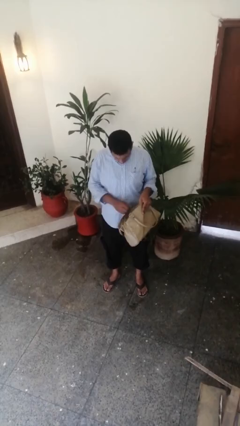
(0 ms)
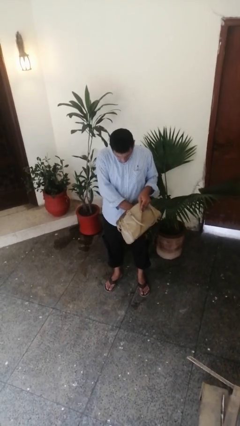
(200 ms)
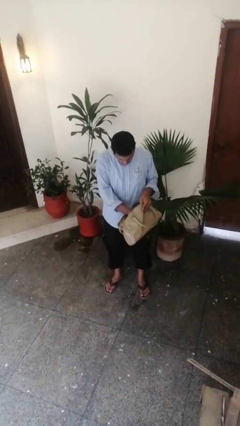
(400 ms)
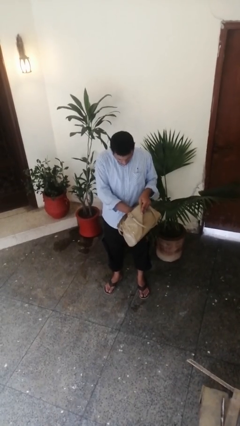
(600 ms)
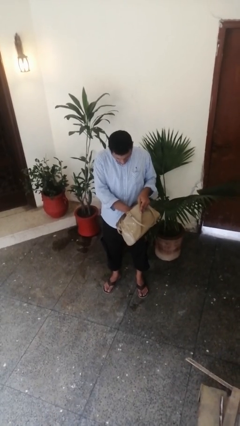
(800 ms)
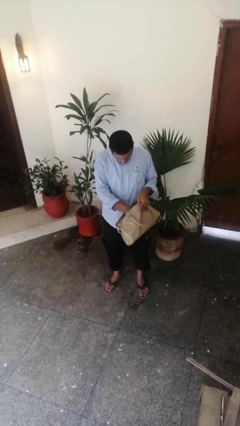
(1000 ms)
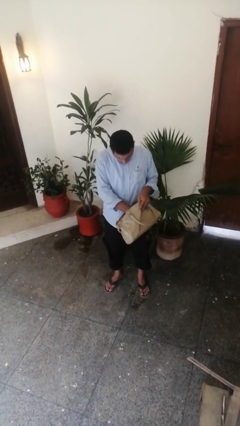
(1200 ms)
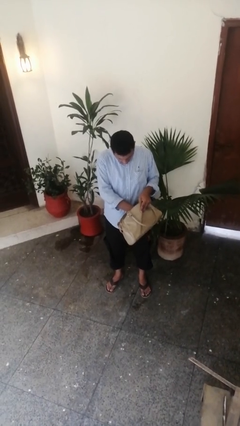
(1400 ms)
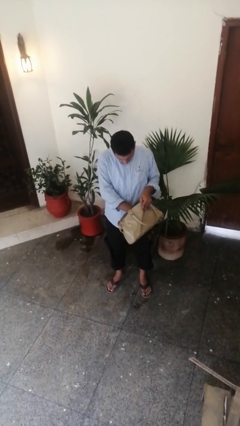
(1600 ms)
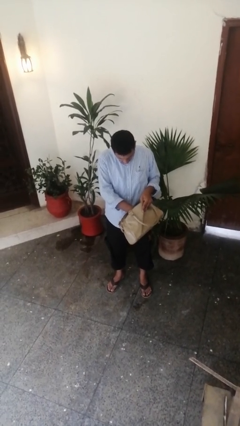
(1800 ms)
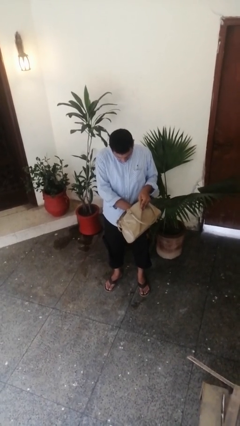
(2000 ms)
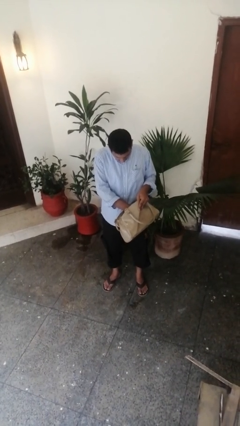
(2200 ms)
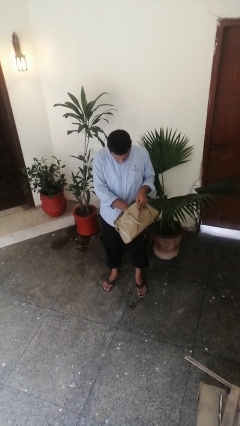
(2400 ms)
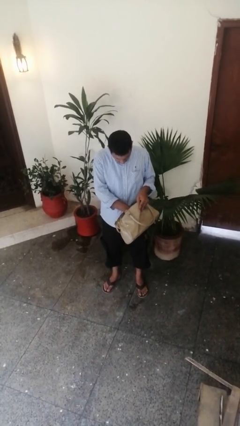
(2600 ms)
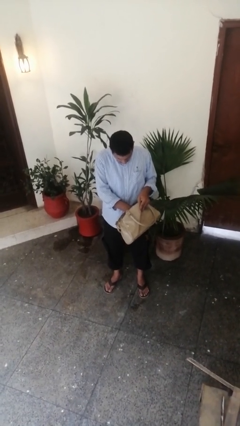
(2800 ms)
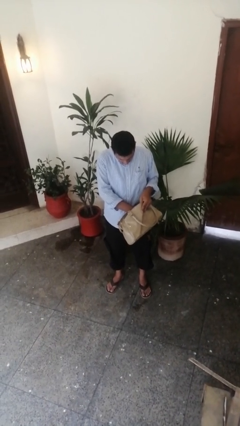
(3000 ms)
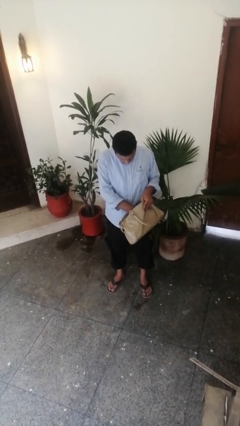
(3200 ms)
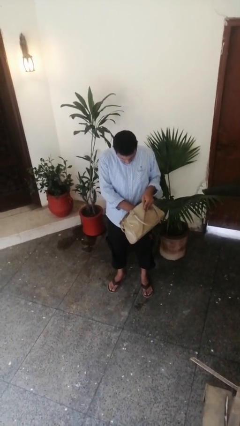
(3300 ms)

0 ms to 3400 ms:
person searches in purse

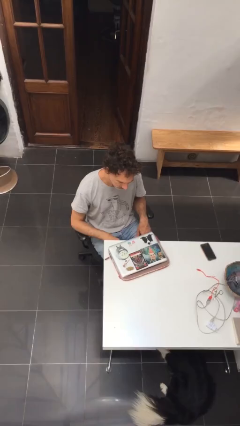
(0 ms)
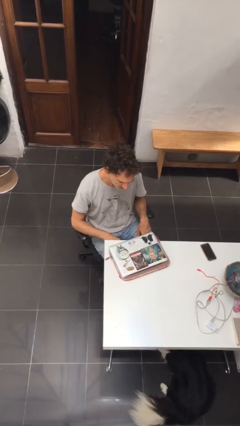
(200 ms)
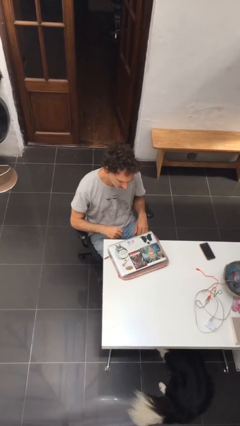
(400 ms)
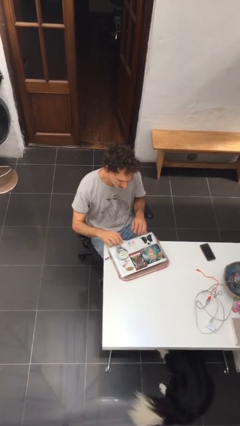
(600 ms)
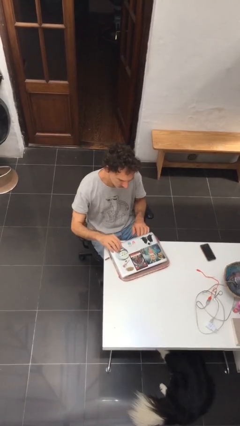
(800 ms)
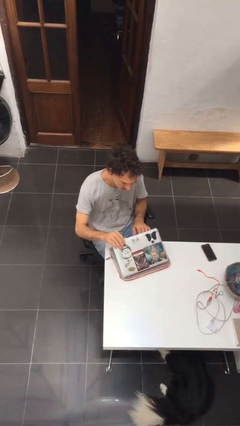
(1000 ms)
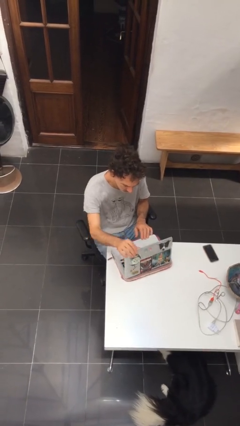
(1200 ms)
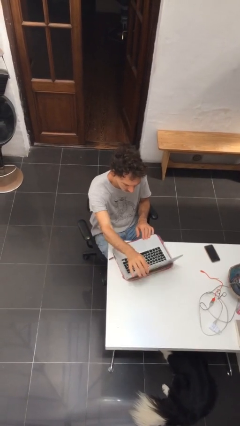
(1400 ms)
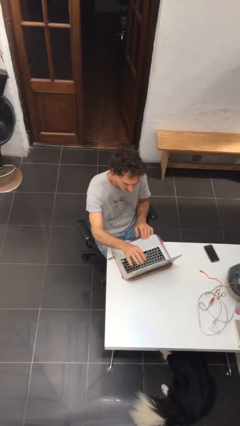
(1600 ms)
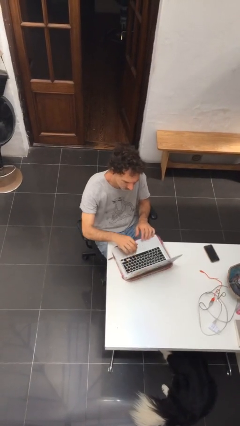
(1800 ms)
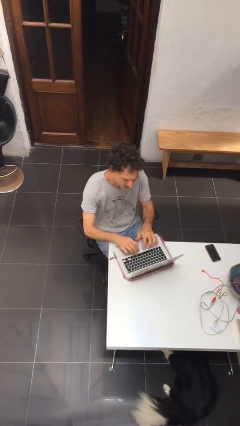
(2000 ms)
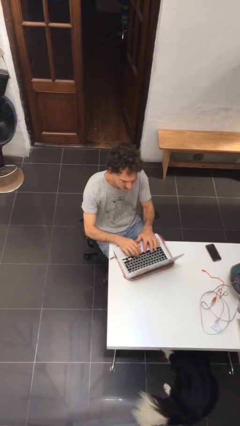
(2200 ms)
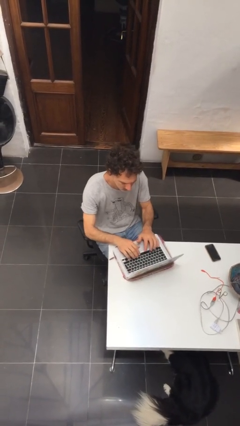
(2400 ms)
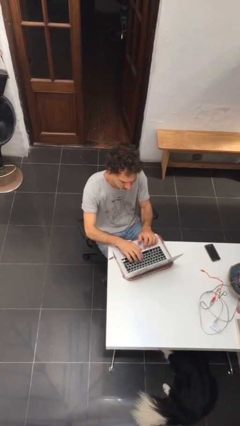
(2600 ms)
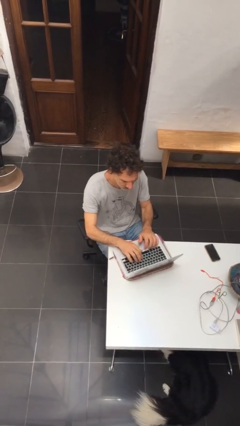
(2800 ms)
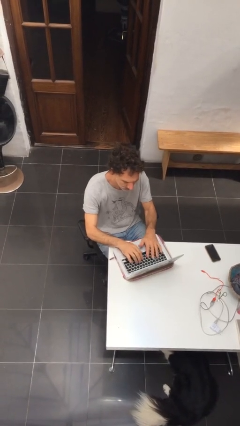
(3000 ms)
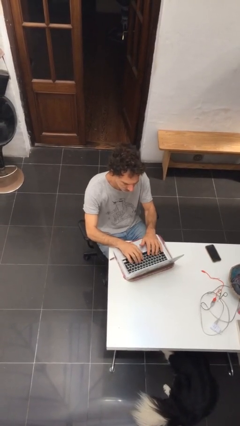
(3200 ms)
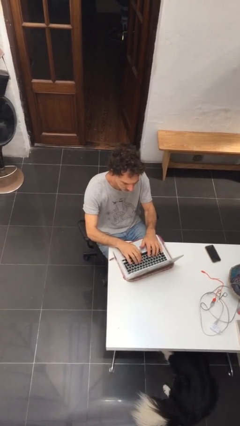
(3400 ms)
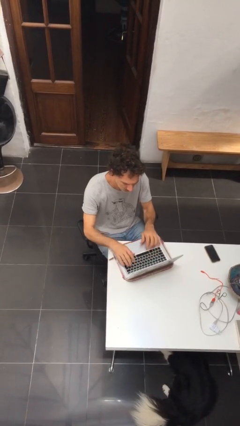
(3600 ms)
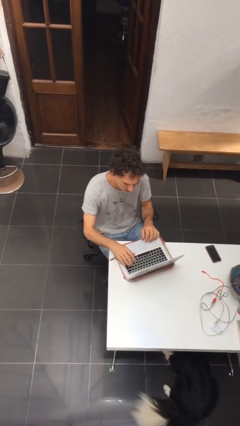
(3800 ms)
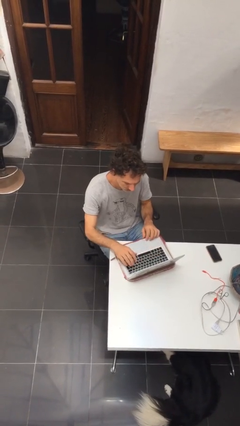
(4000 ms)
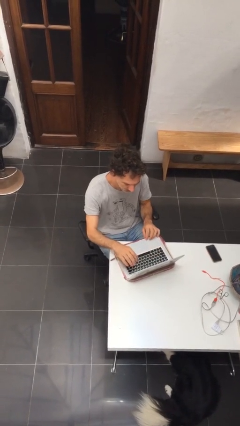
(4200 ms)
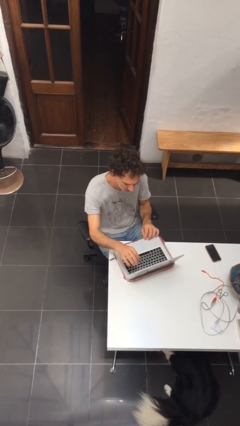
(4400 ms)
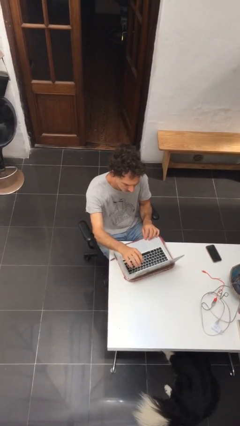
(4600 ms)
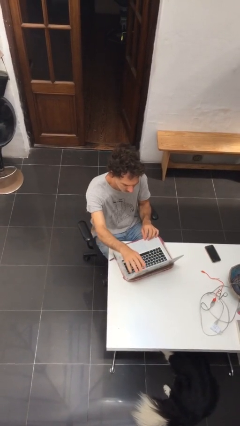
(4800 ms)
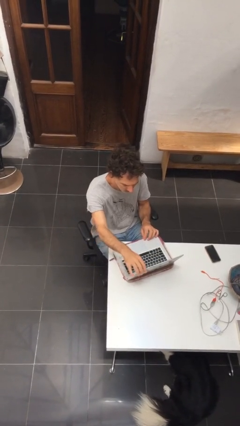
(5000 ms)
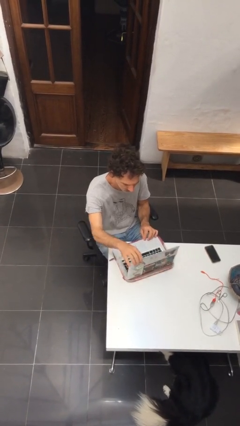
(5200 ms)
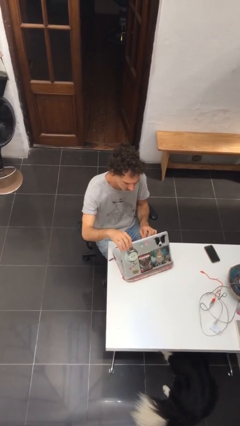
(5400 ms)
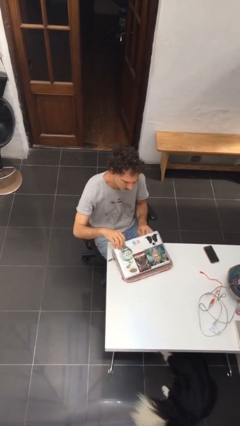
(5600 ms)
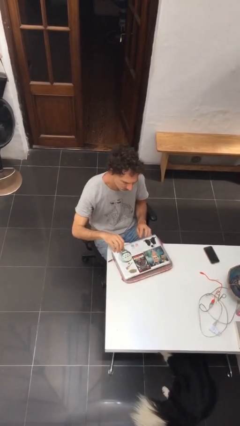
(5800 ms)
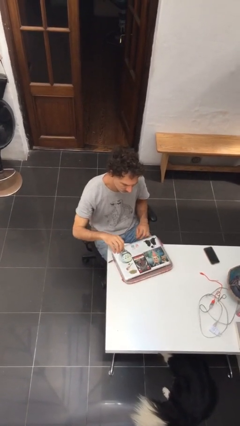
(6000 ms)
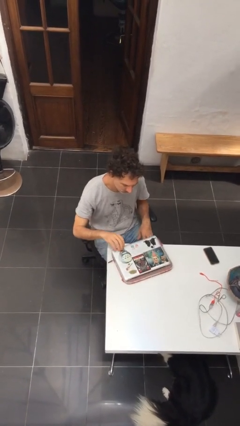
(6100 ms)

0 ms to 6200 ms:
person interacts with laptop

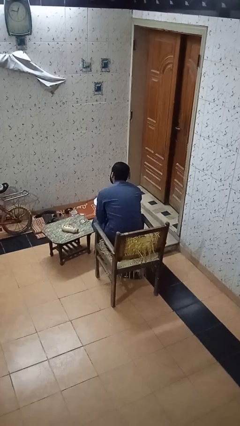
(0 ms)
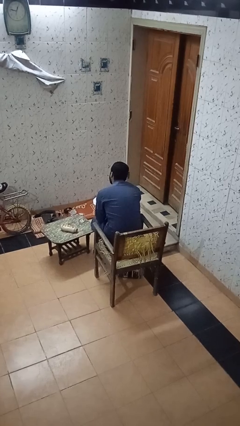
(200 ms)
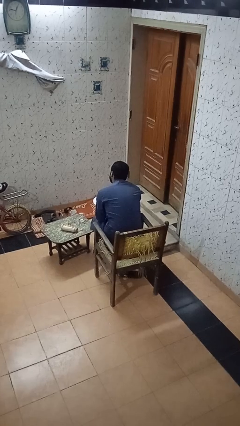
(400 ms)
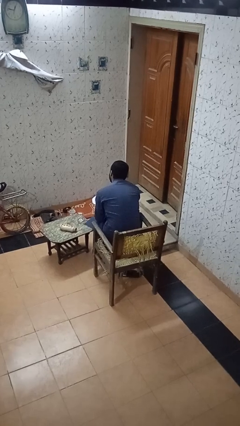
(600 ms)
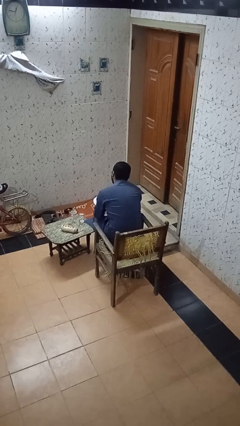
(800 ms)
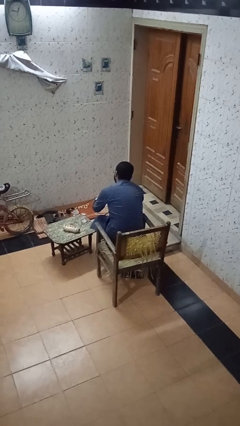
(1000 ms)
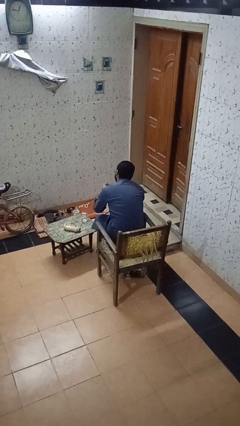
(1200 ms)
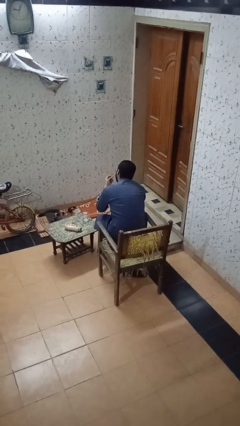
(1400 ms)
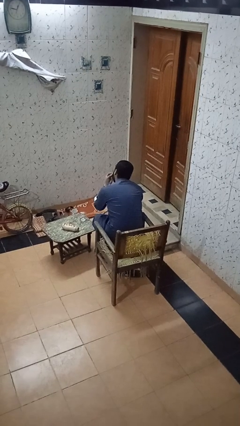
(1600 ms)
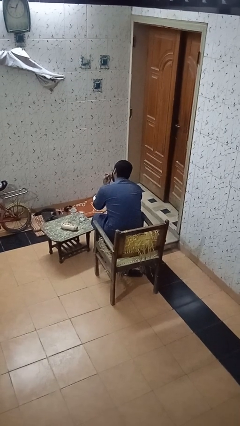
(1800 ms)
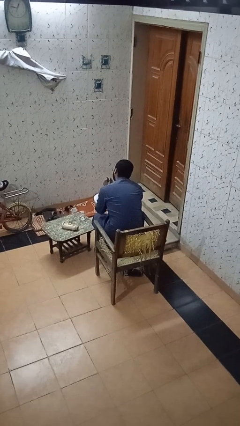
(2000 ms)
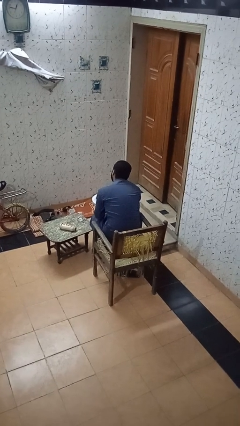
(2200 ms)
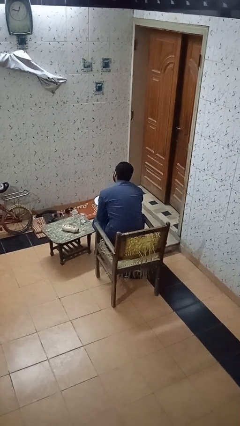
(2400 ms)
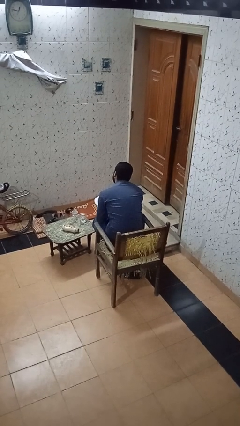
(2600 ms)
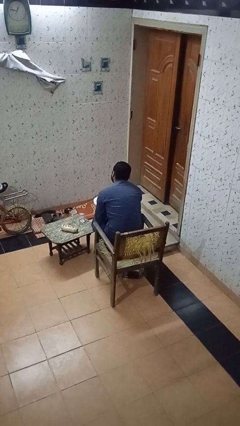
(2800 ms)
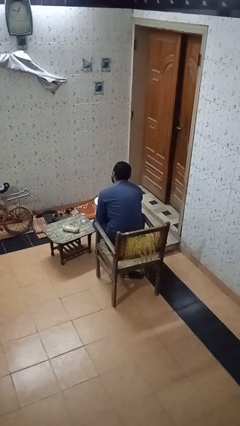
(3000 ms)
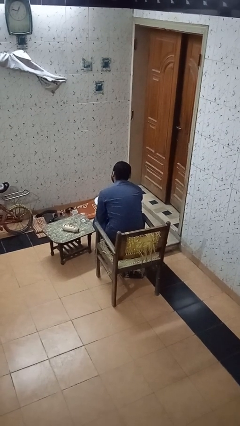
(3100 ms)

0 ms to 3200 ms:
person eats with hands

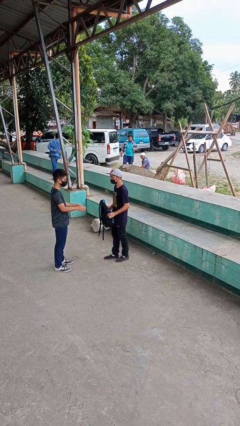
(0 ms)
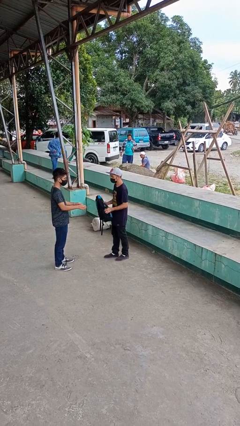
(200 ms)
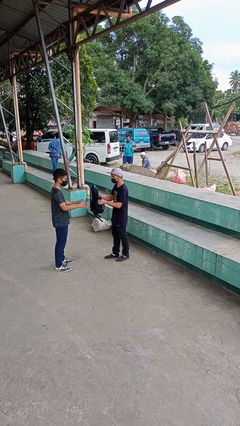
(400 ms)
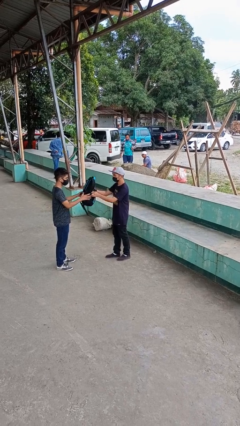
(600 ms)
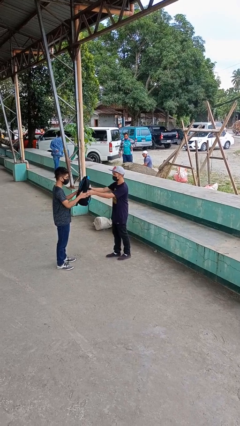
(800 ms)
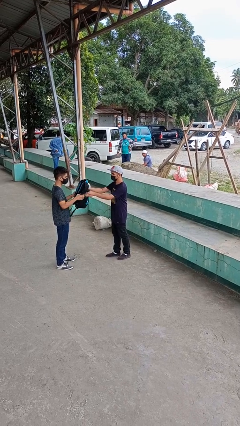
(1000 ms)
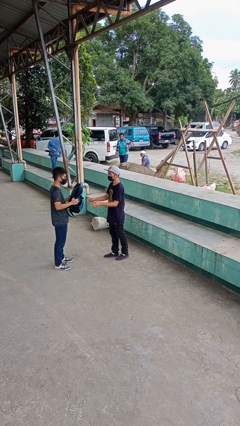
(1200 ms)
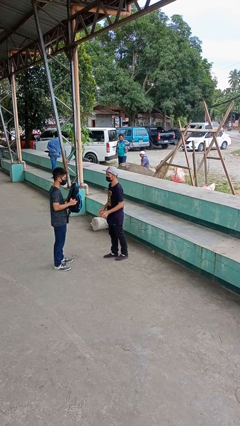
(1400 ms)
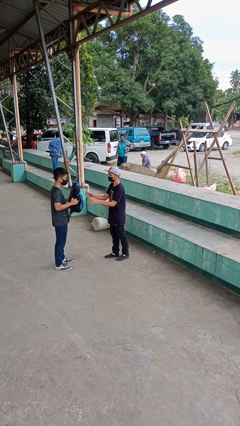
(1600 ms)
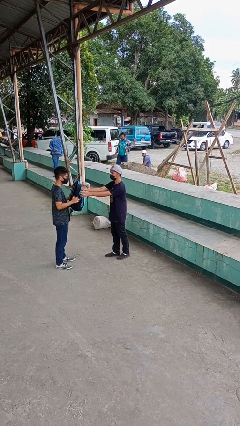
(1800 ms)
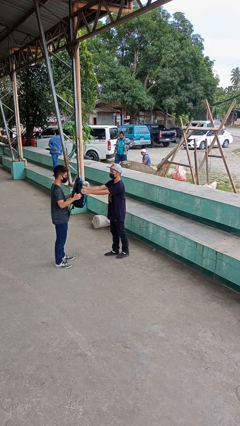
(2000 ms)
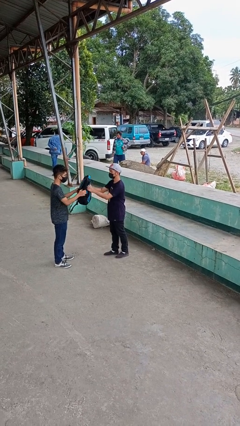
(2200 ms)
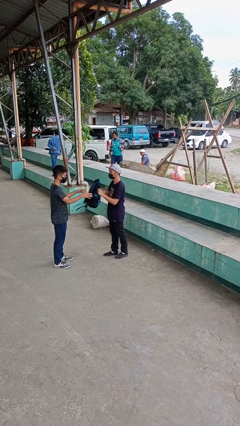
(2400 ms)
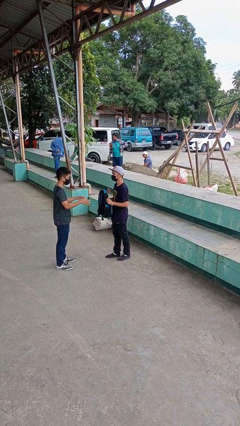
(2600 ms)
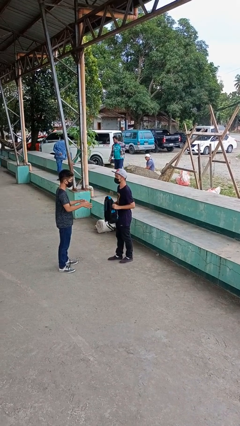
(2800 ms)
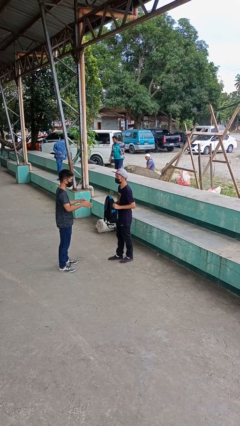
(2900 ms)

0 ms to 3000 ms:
person transfers object to person

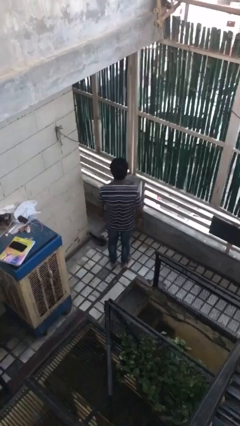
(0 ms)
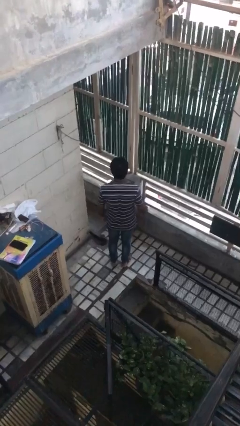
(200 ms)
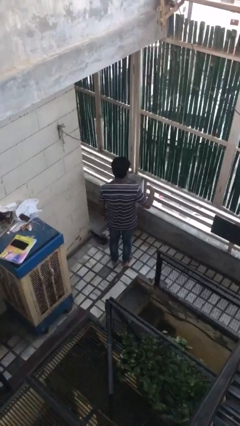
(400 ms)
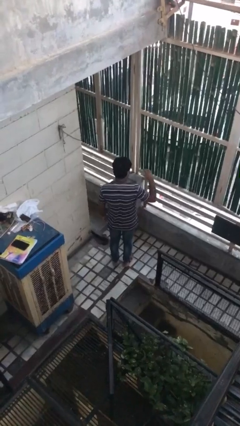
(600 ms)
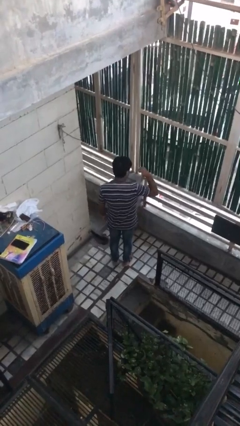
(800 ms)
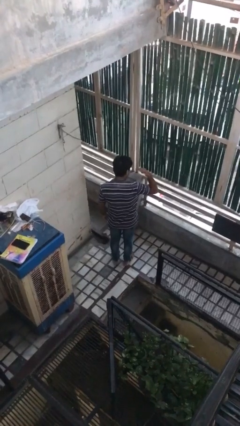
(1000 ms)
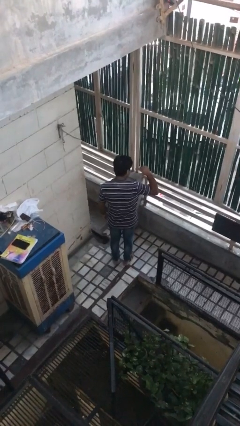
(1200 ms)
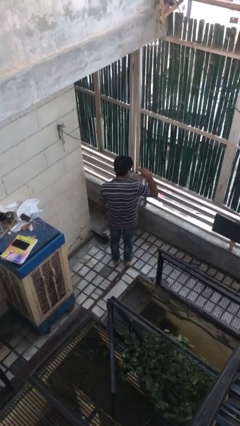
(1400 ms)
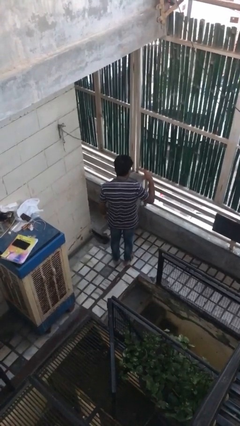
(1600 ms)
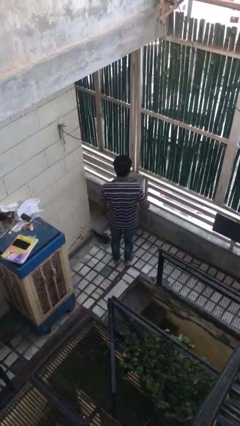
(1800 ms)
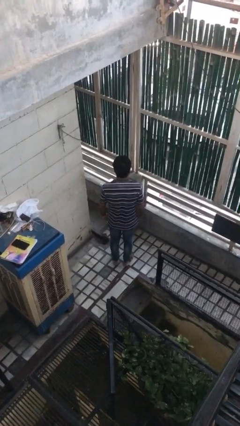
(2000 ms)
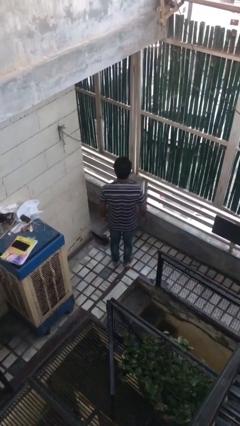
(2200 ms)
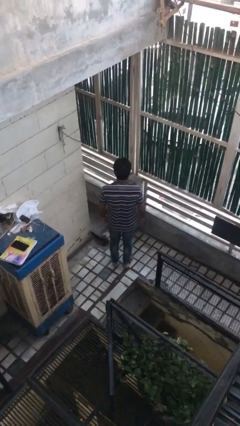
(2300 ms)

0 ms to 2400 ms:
person gestures behind me
